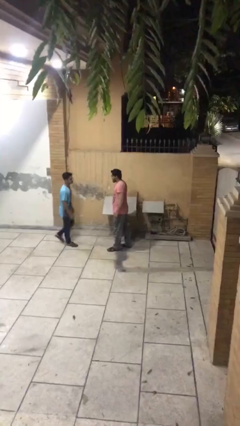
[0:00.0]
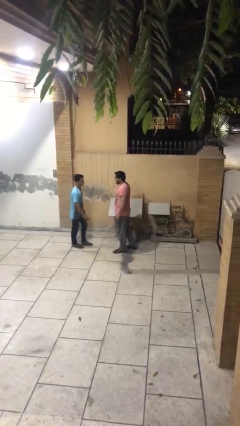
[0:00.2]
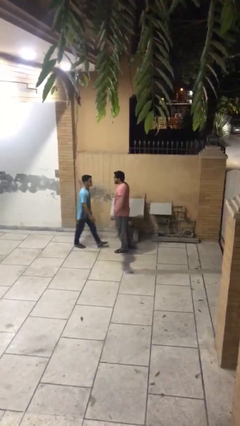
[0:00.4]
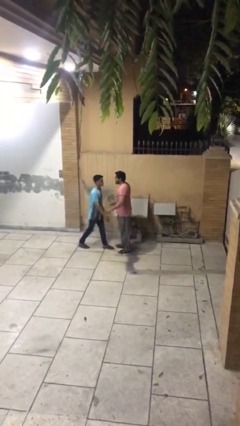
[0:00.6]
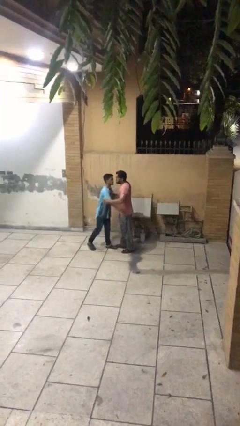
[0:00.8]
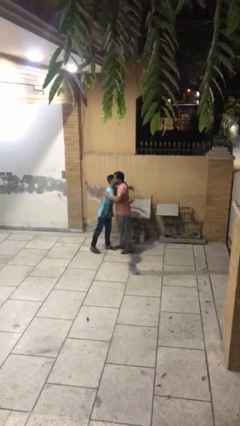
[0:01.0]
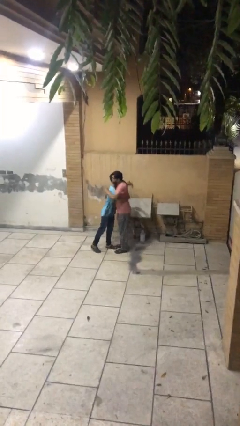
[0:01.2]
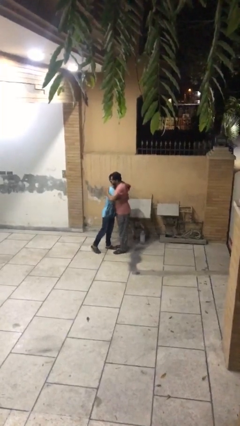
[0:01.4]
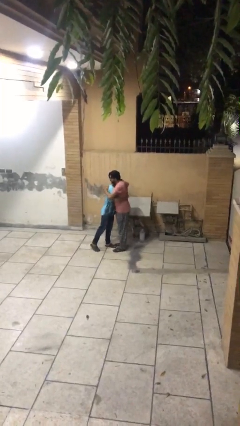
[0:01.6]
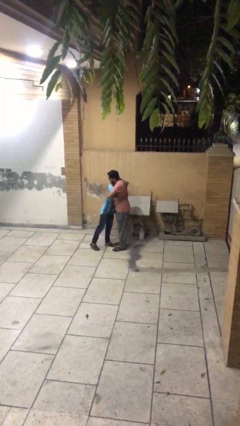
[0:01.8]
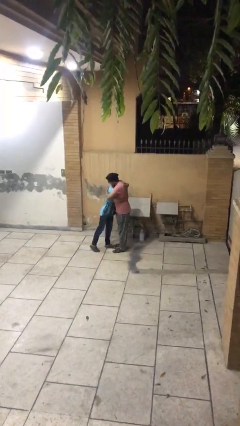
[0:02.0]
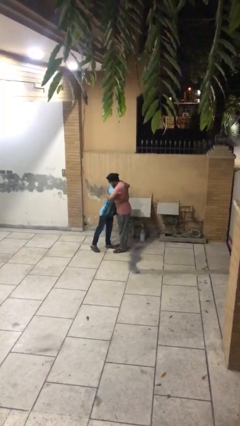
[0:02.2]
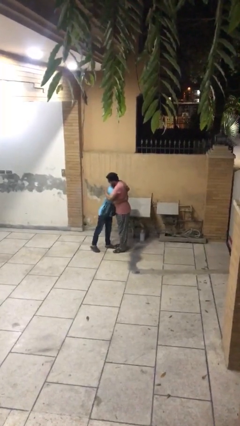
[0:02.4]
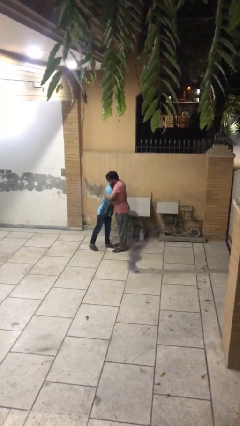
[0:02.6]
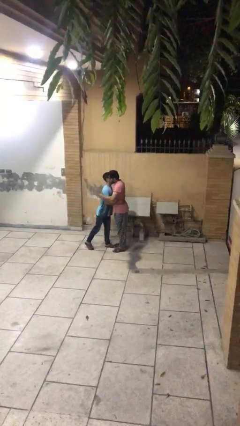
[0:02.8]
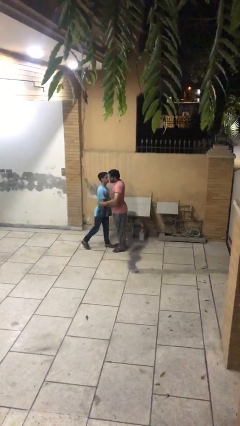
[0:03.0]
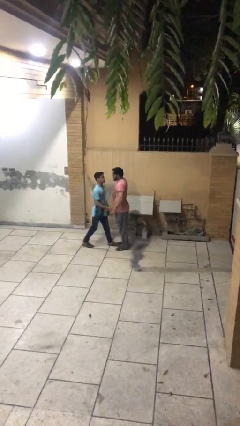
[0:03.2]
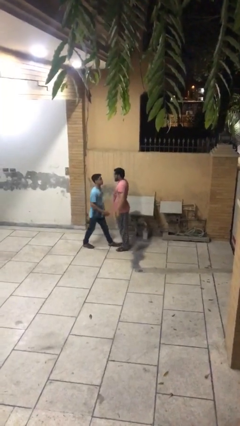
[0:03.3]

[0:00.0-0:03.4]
person embraces person

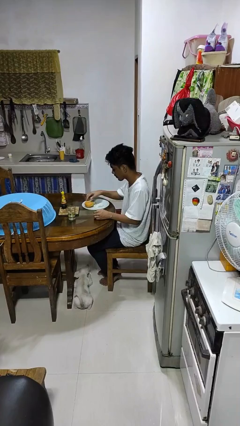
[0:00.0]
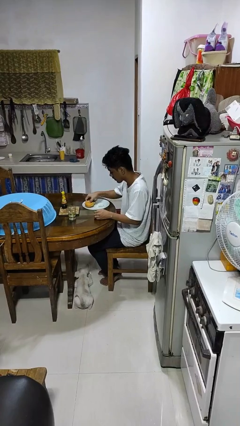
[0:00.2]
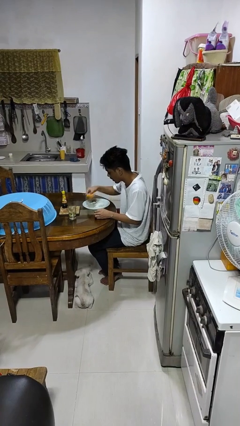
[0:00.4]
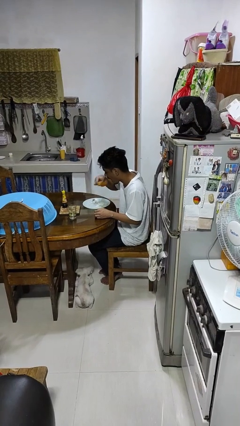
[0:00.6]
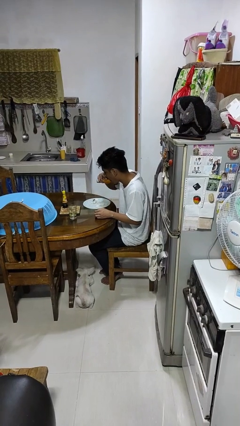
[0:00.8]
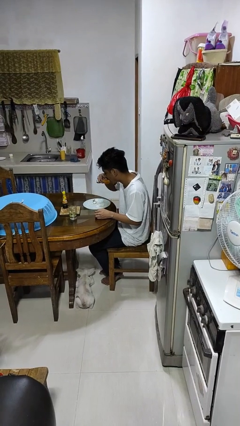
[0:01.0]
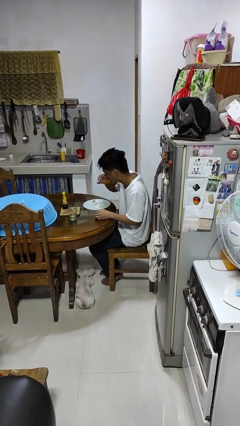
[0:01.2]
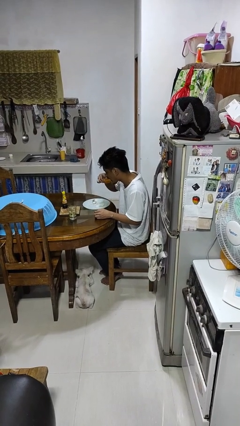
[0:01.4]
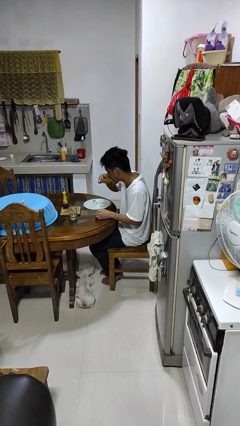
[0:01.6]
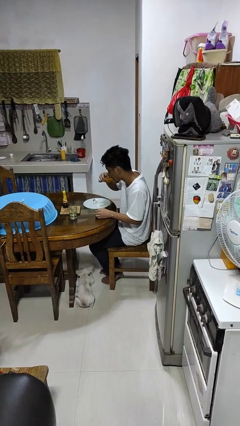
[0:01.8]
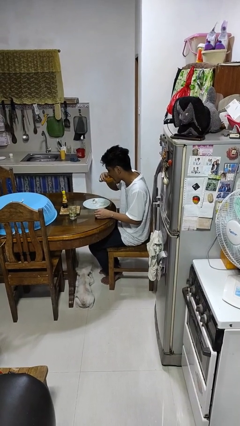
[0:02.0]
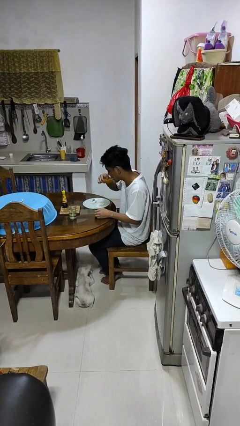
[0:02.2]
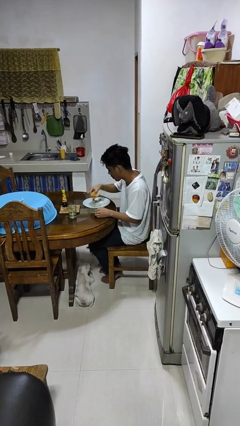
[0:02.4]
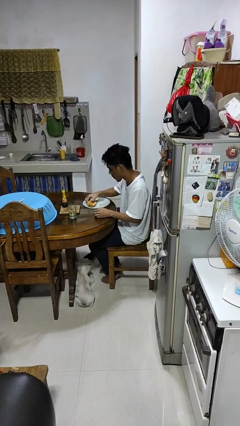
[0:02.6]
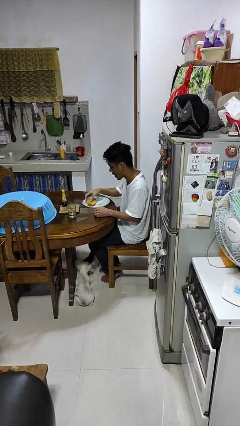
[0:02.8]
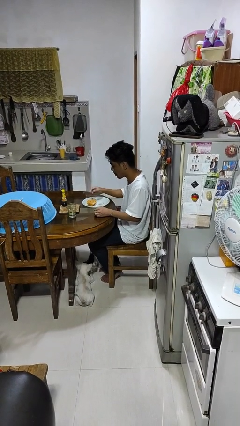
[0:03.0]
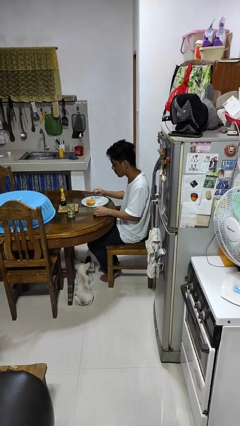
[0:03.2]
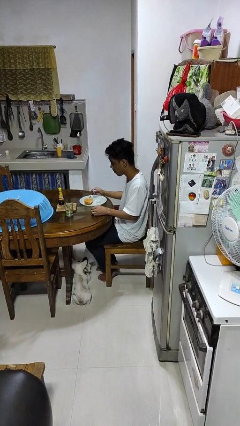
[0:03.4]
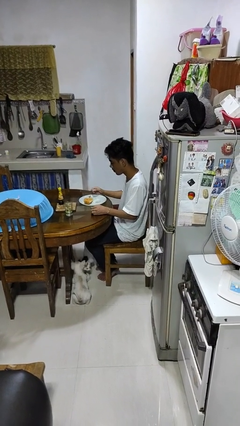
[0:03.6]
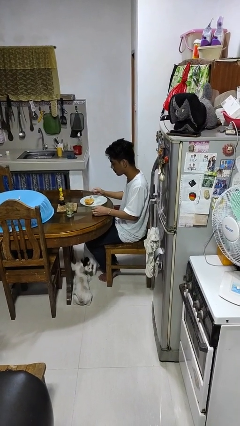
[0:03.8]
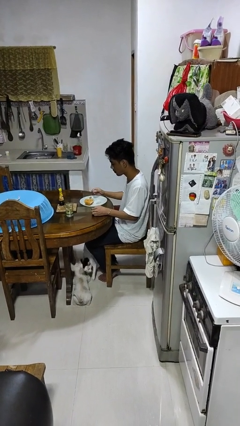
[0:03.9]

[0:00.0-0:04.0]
person eats with hands

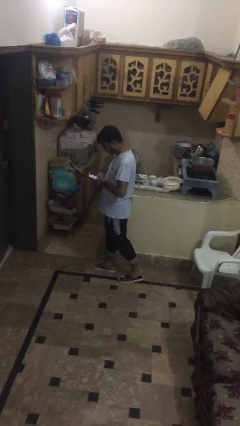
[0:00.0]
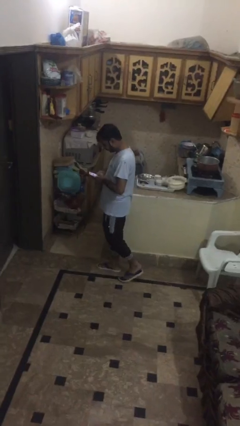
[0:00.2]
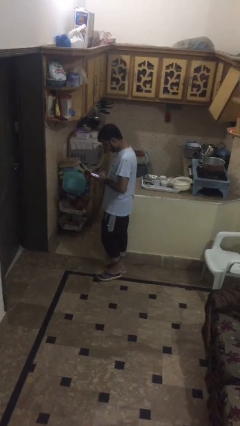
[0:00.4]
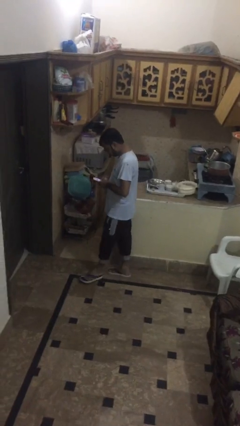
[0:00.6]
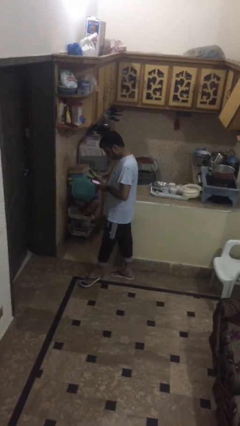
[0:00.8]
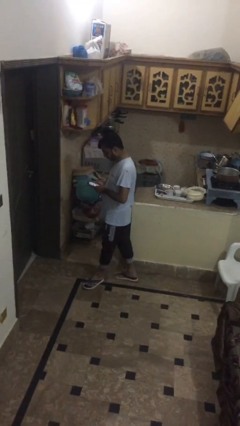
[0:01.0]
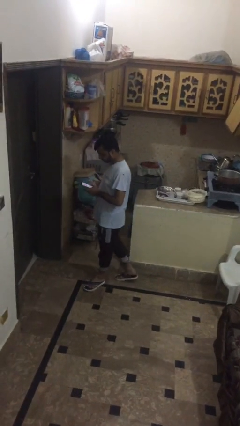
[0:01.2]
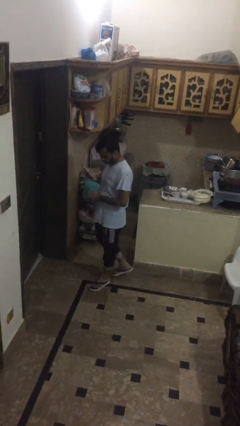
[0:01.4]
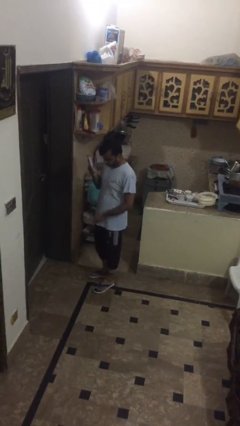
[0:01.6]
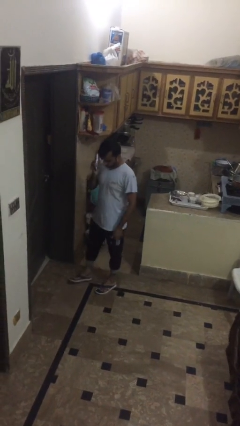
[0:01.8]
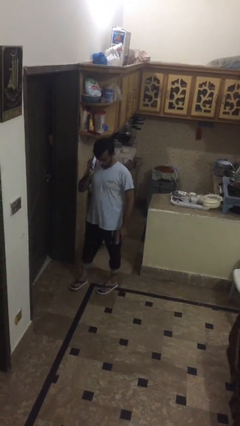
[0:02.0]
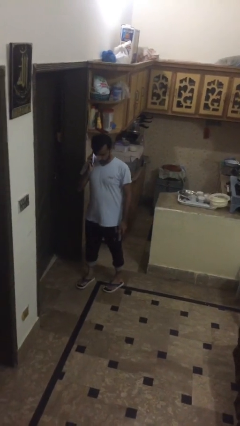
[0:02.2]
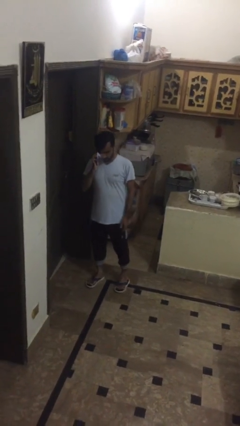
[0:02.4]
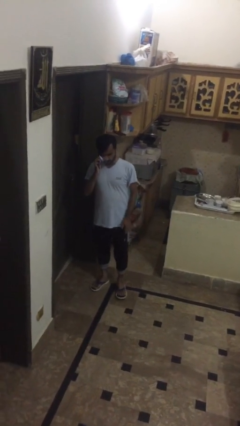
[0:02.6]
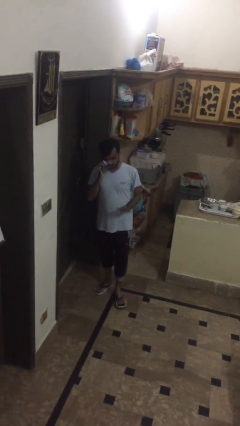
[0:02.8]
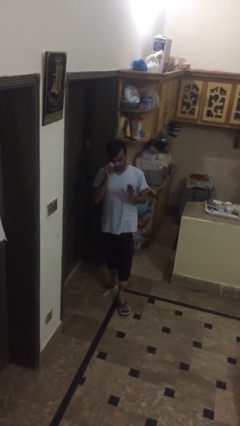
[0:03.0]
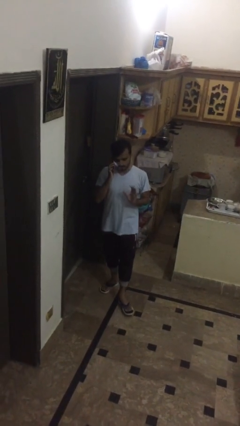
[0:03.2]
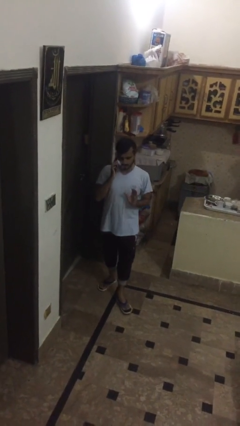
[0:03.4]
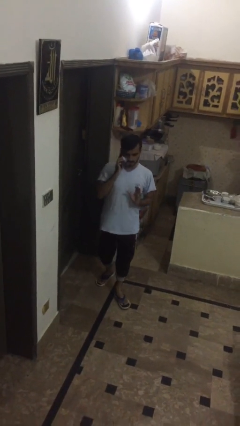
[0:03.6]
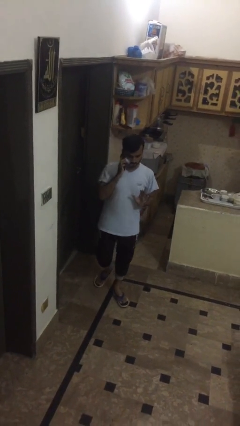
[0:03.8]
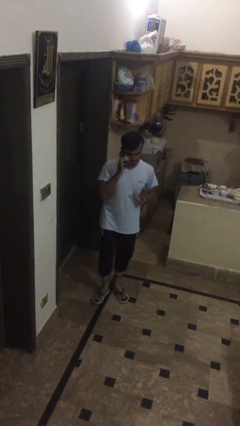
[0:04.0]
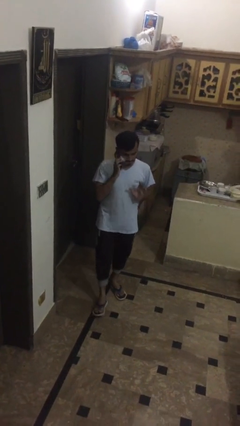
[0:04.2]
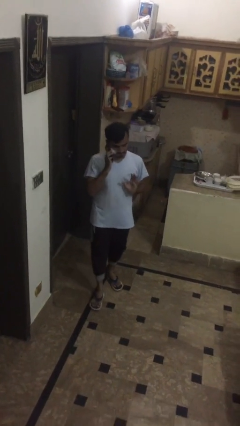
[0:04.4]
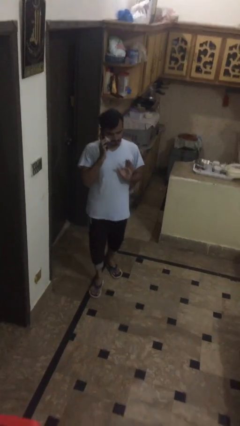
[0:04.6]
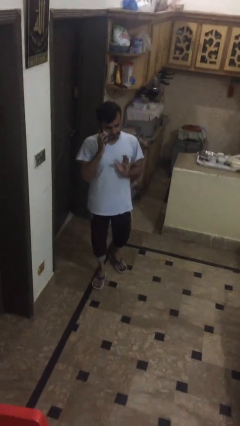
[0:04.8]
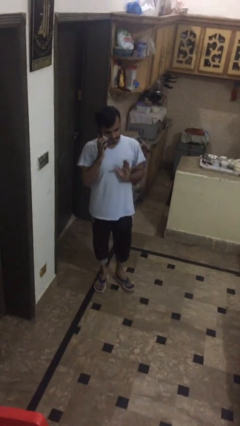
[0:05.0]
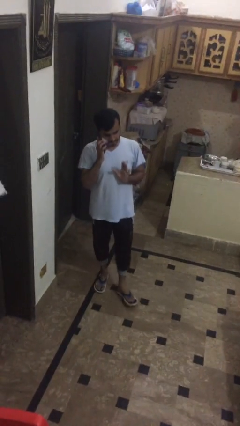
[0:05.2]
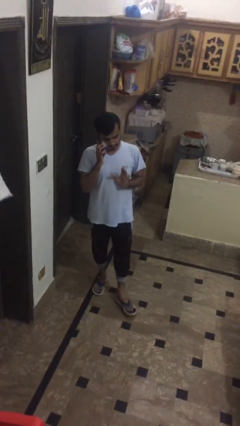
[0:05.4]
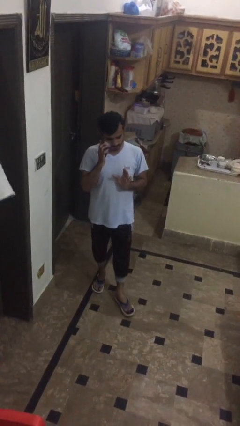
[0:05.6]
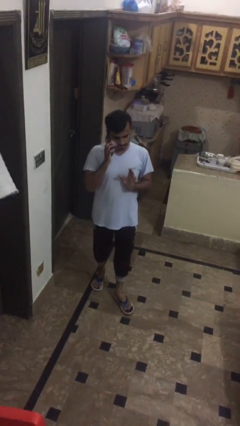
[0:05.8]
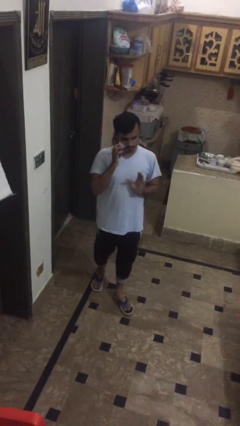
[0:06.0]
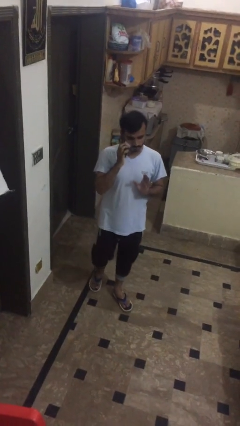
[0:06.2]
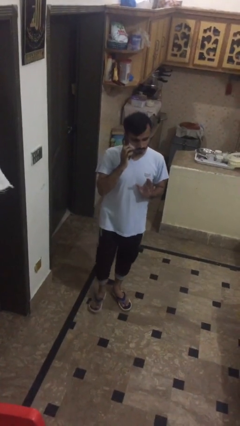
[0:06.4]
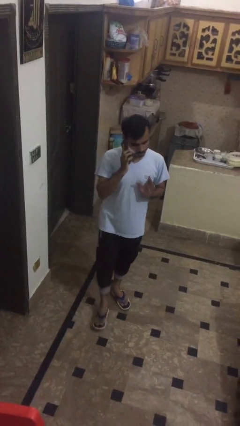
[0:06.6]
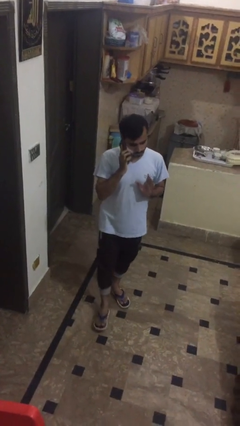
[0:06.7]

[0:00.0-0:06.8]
person talks on phone

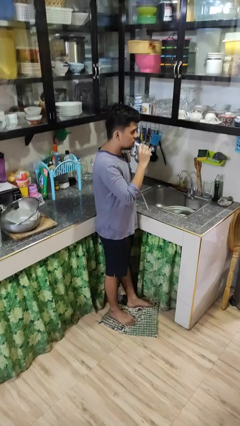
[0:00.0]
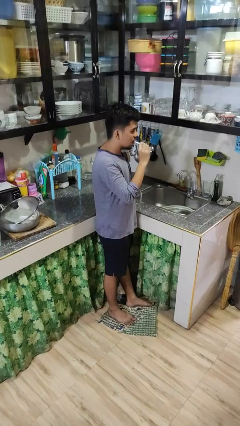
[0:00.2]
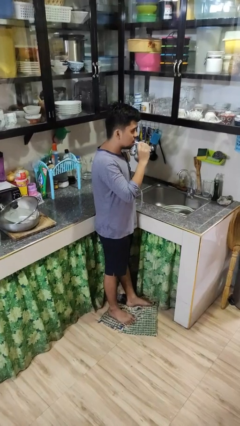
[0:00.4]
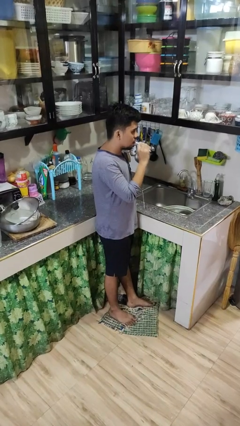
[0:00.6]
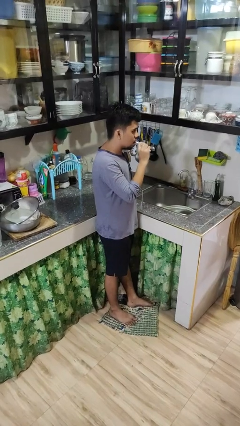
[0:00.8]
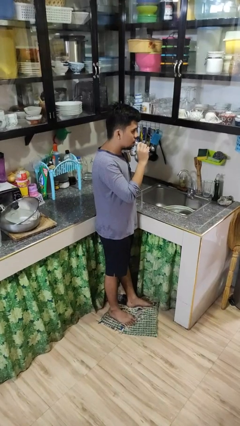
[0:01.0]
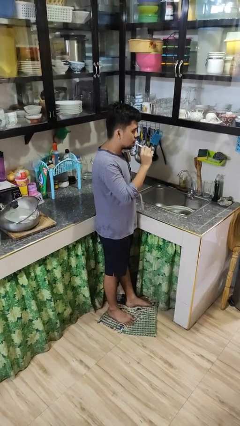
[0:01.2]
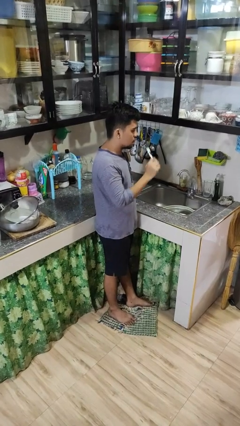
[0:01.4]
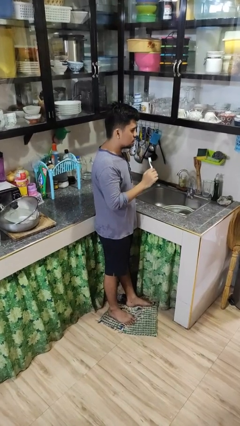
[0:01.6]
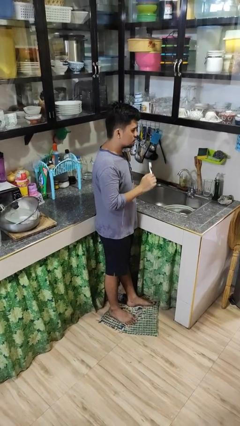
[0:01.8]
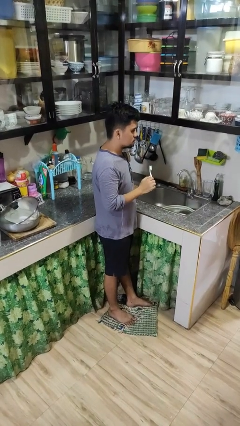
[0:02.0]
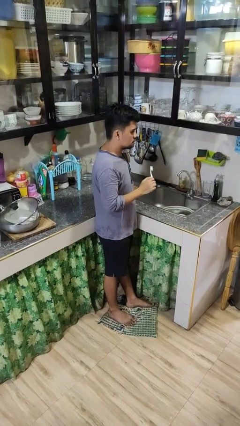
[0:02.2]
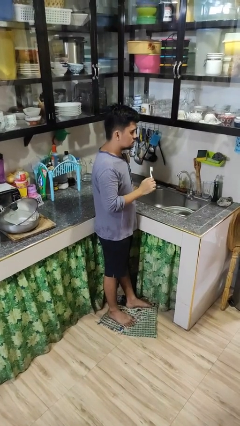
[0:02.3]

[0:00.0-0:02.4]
person brushes teeth

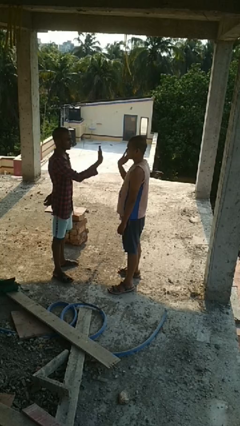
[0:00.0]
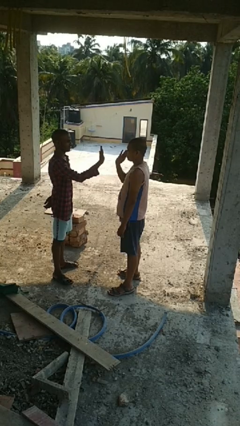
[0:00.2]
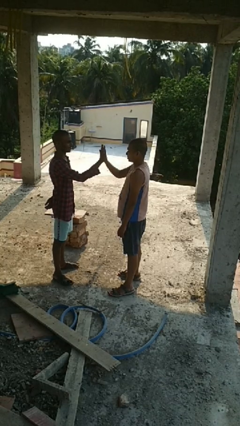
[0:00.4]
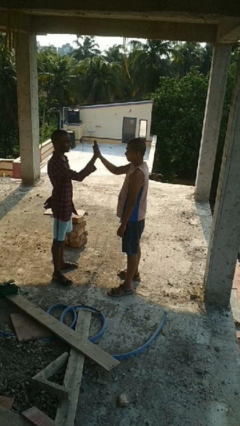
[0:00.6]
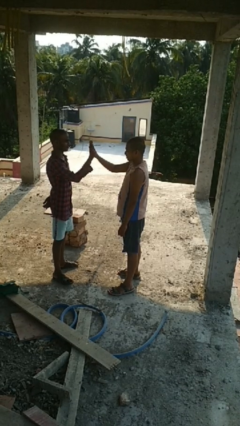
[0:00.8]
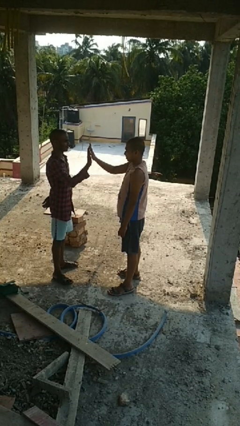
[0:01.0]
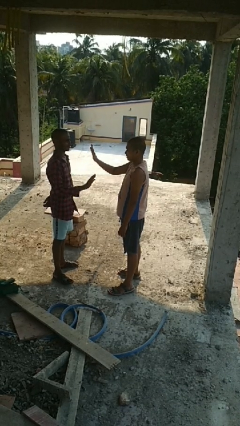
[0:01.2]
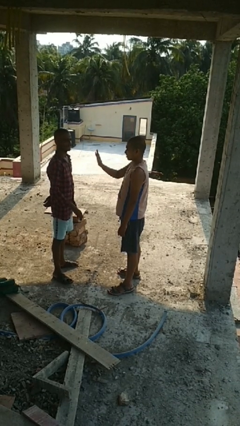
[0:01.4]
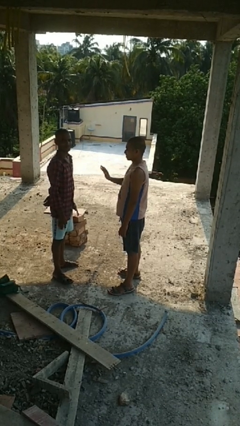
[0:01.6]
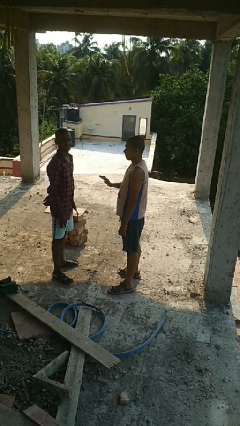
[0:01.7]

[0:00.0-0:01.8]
person highfives hand
